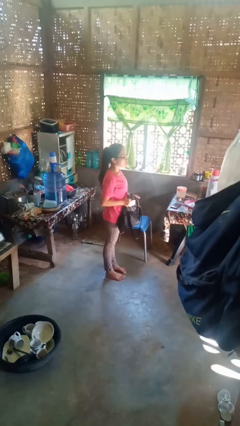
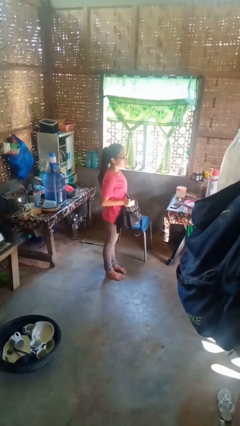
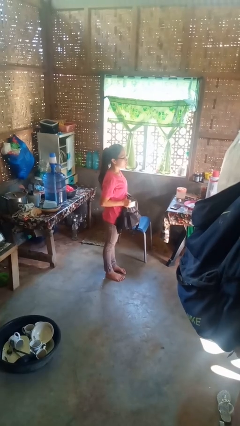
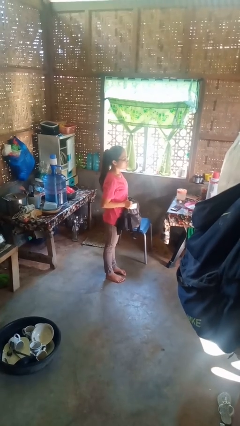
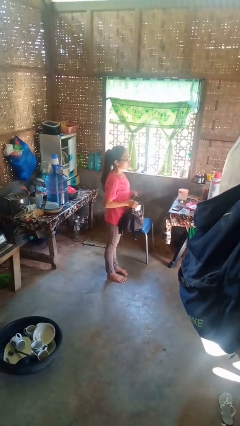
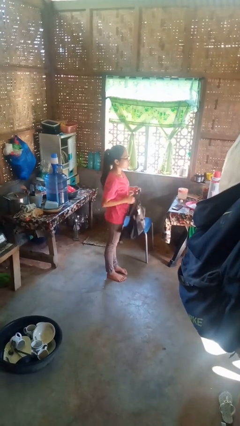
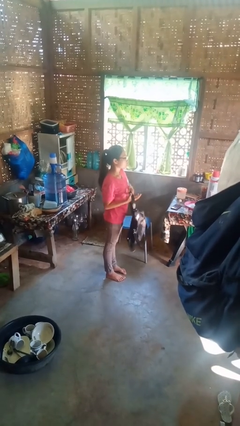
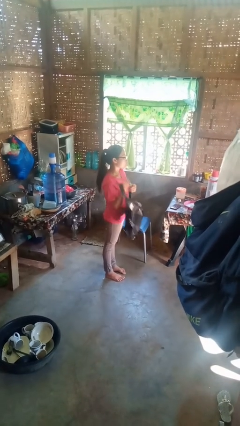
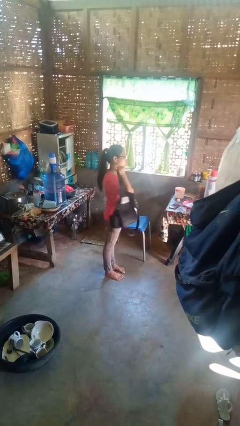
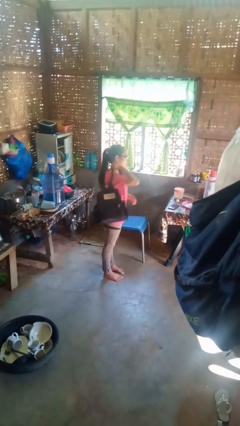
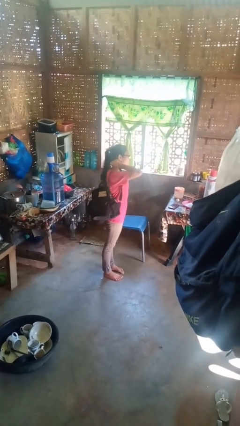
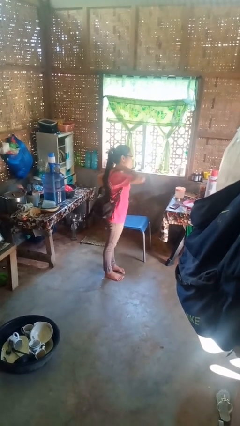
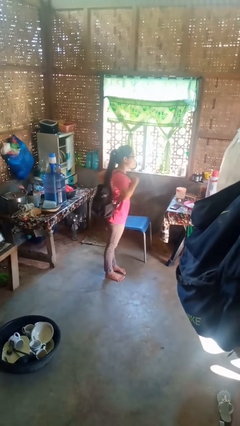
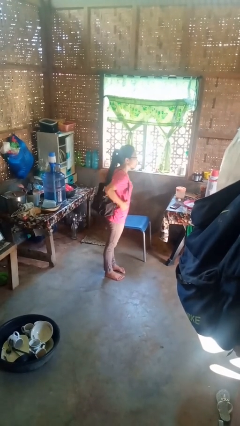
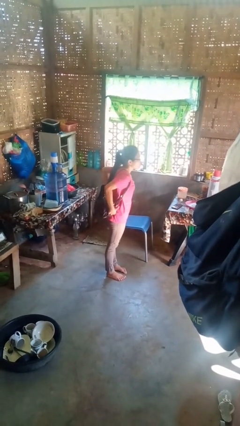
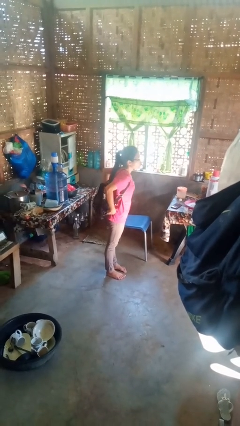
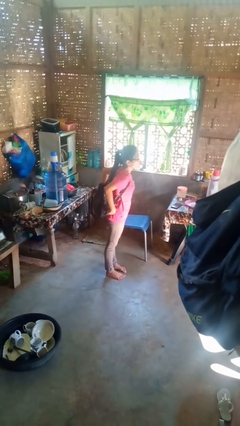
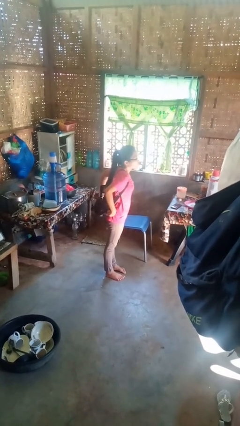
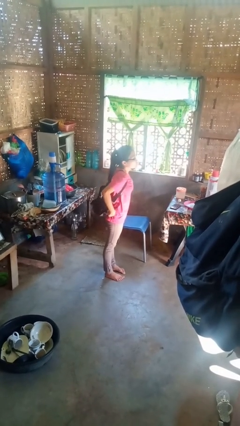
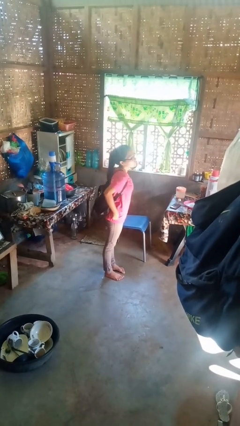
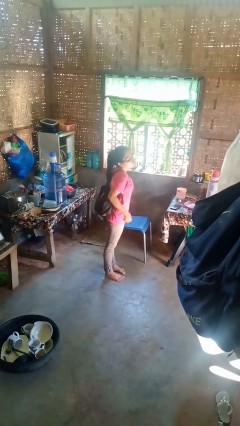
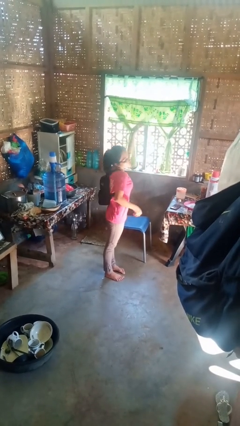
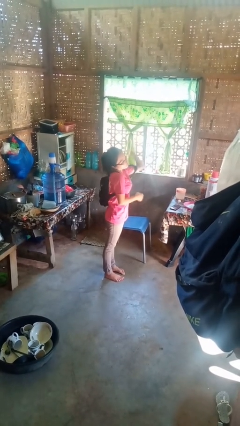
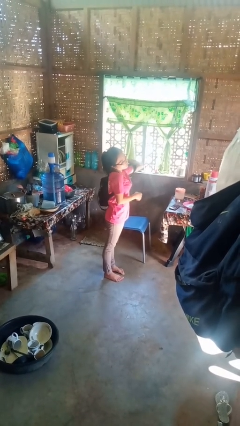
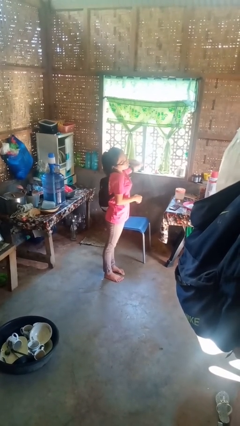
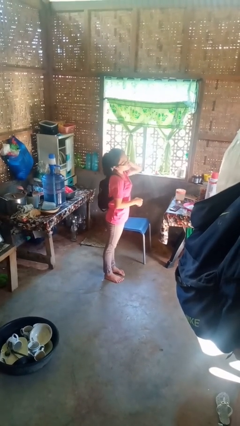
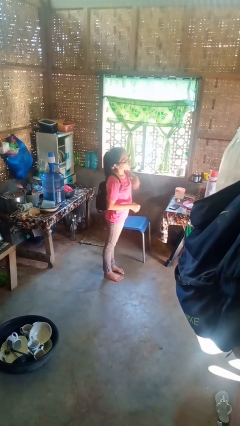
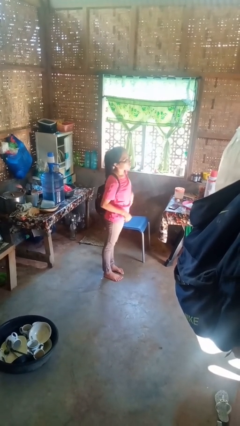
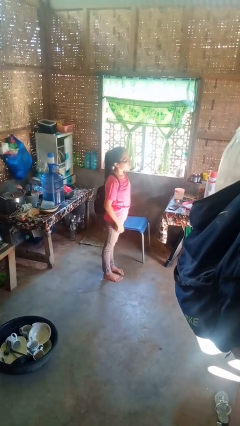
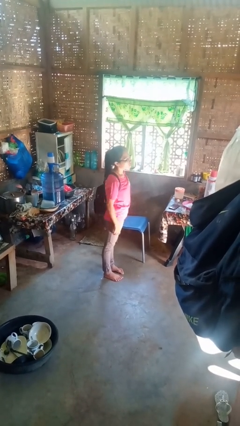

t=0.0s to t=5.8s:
person puts on backpack

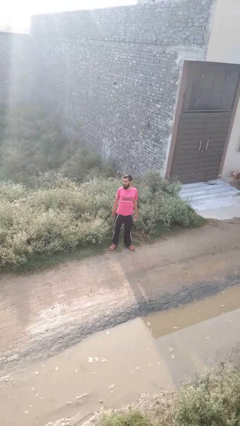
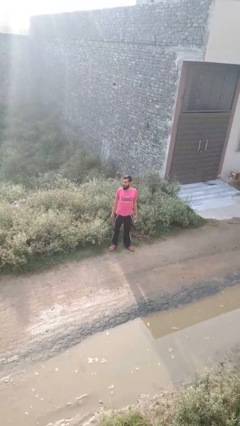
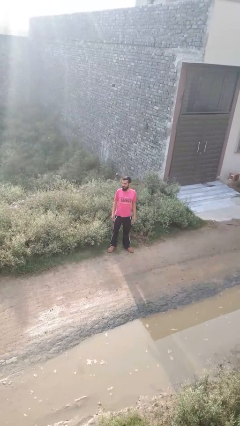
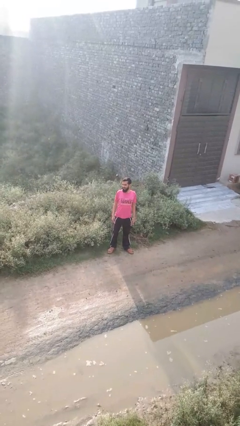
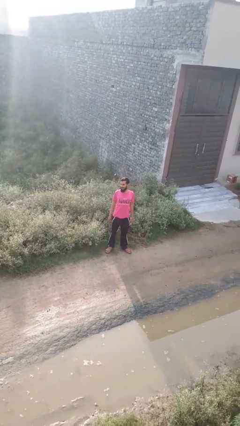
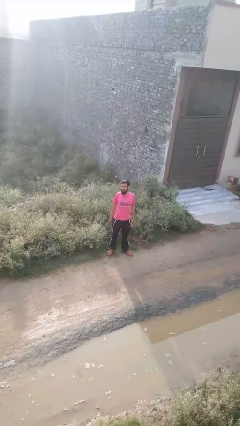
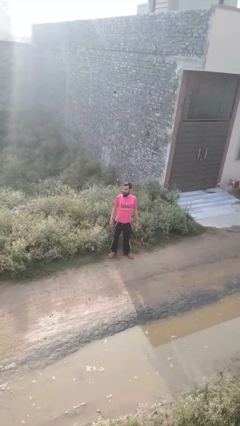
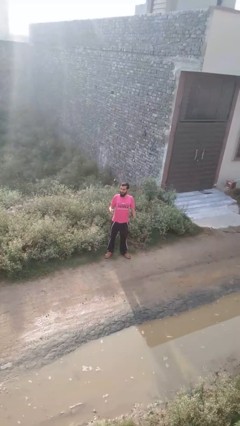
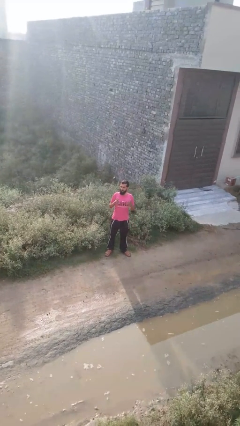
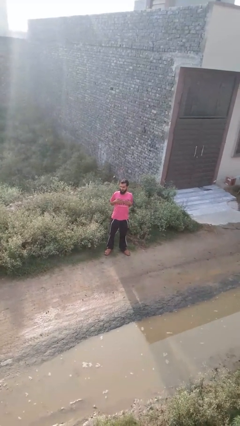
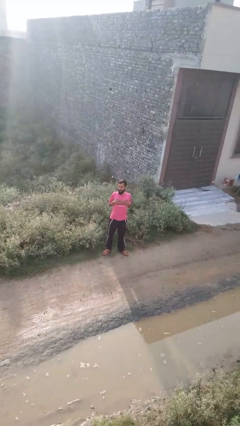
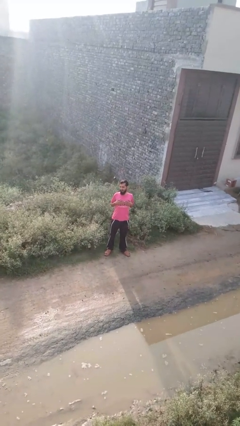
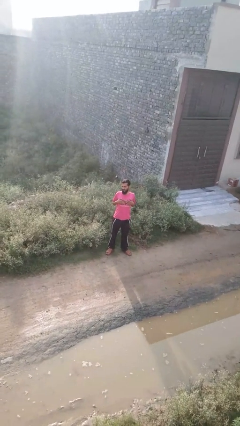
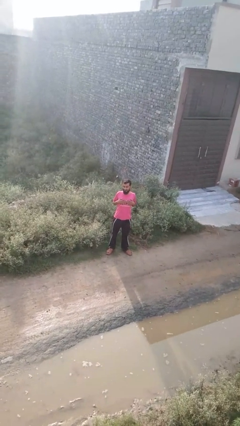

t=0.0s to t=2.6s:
person drums on chest

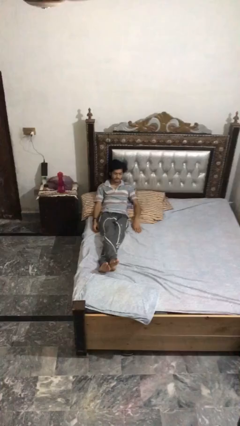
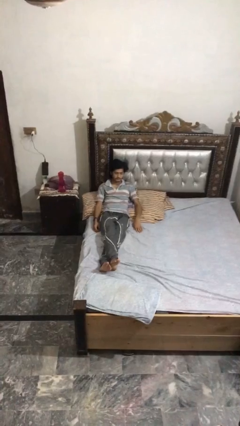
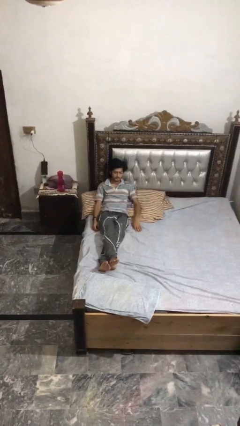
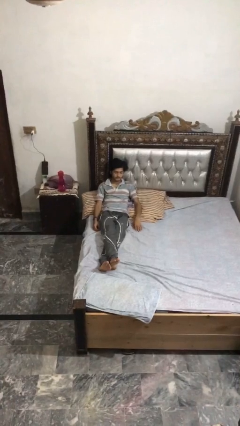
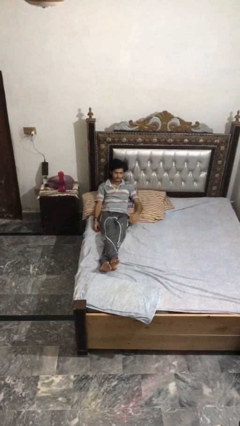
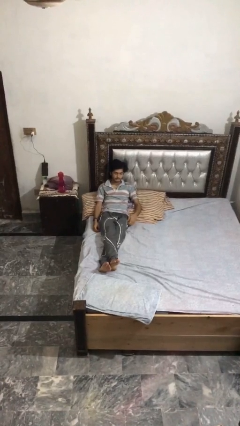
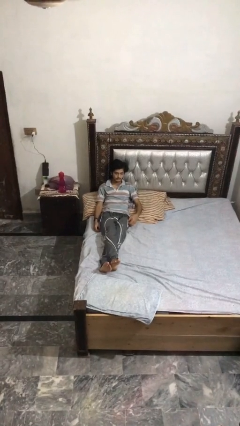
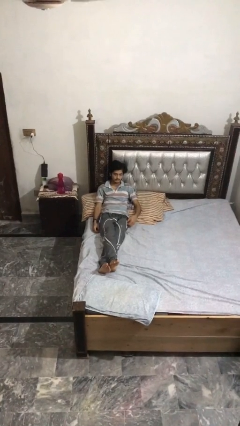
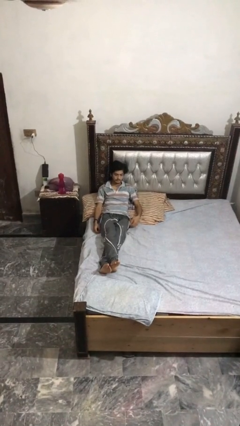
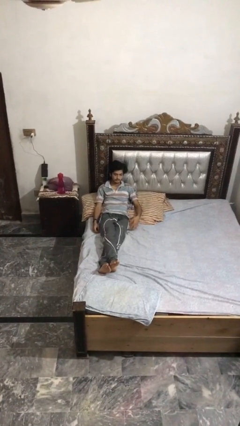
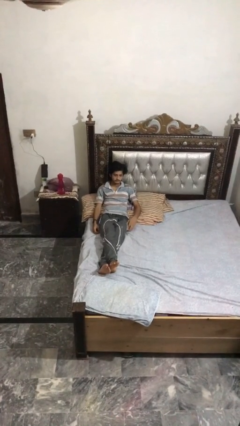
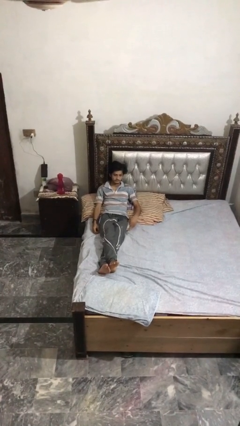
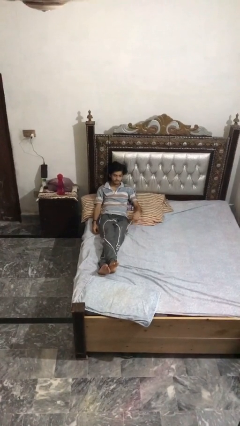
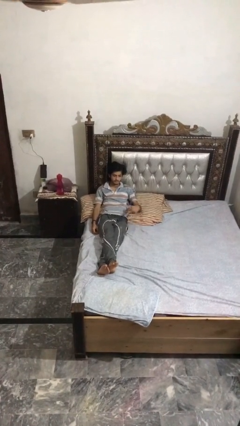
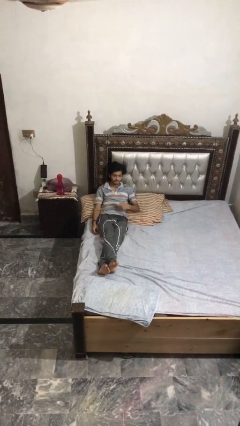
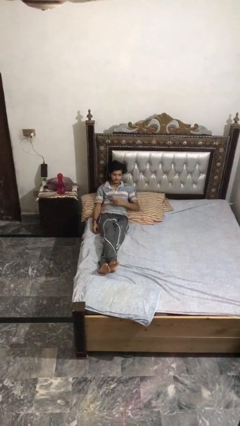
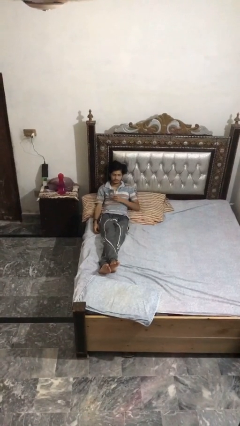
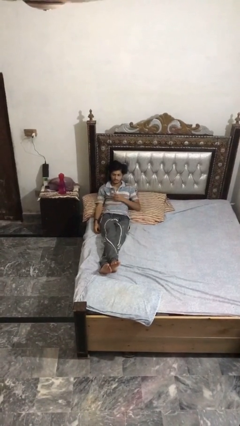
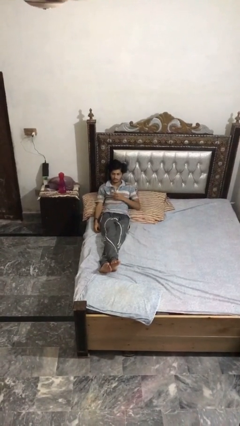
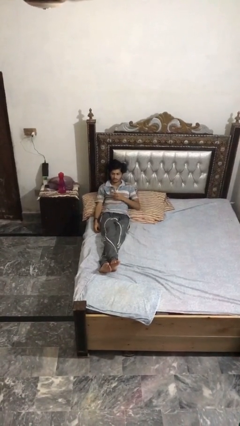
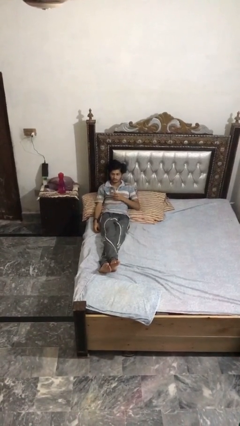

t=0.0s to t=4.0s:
person takes phone from pocket

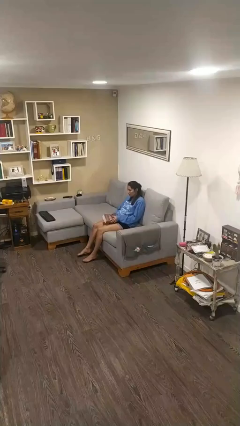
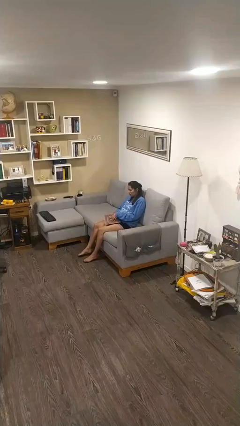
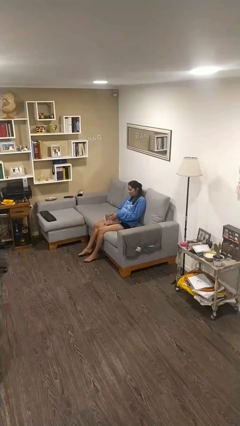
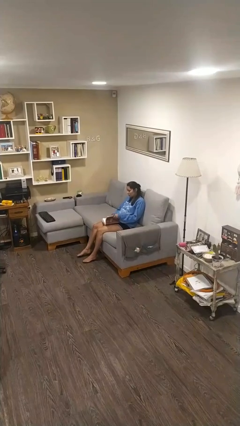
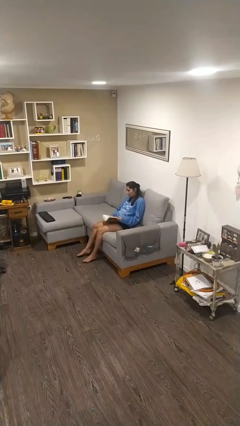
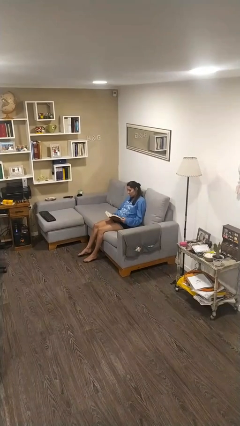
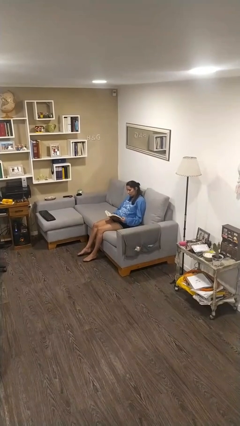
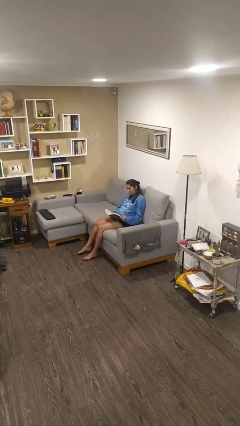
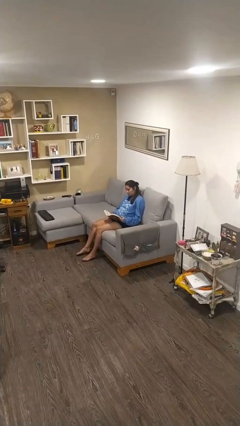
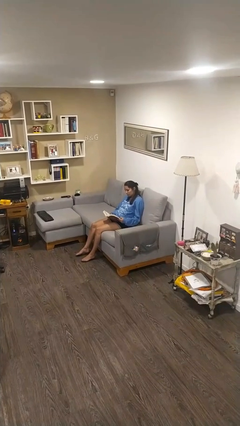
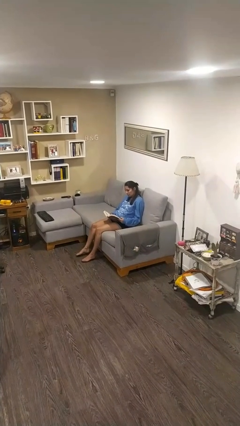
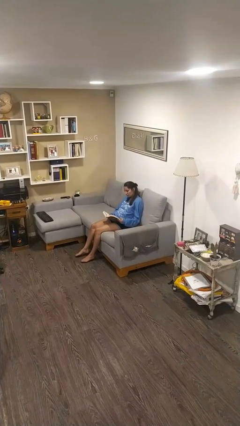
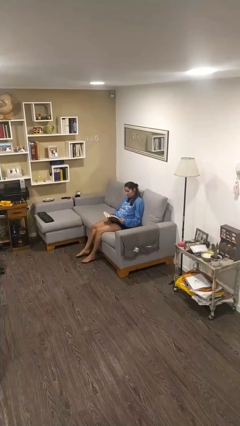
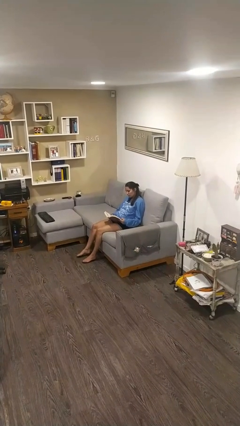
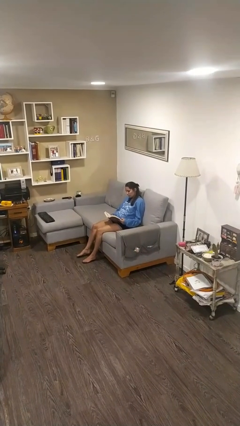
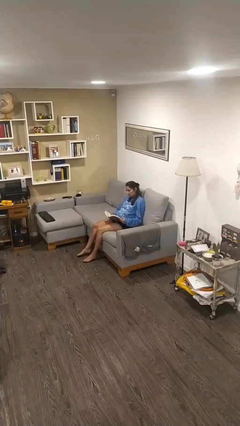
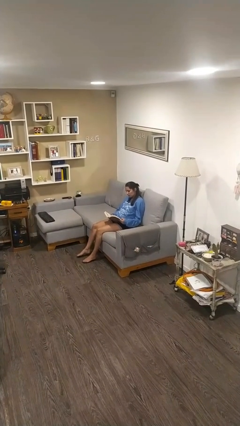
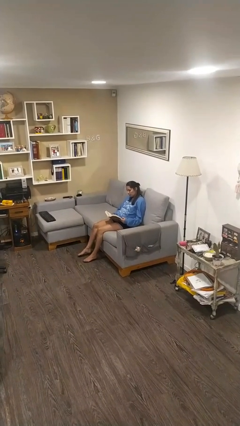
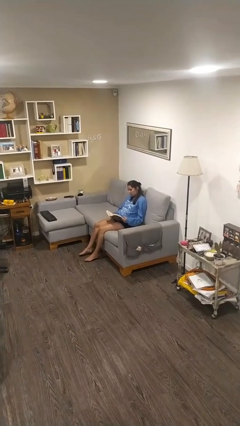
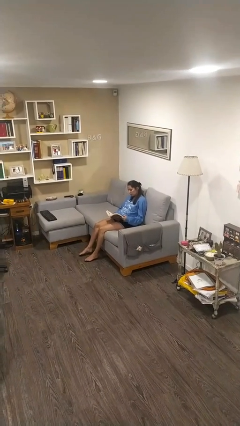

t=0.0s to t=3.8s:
person reads document

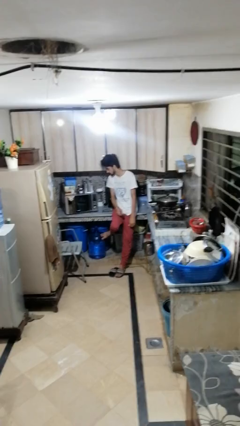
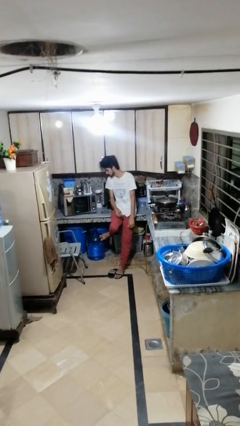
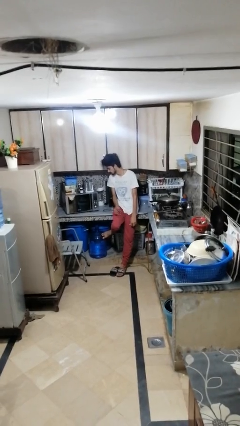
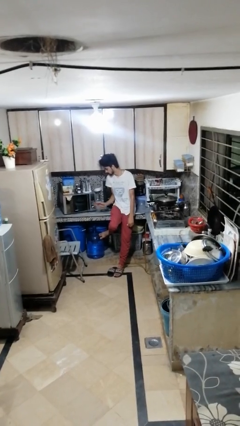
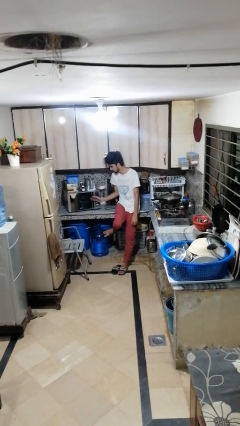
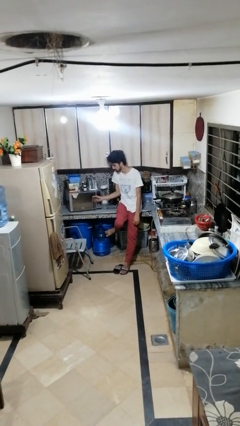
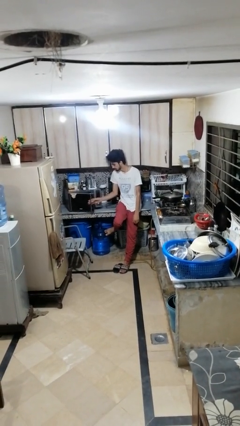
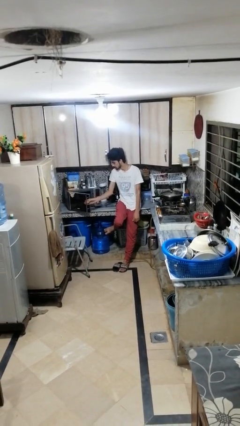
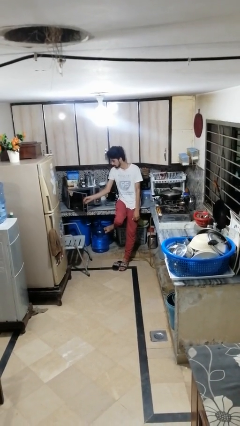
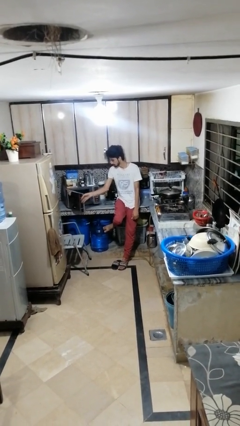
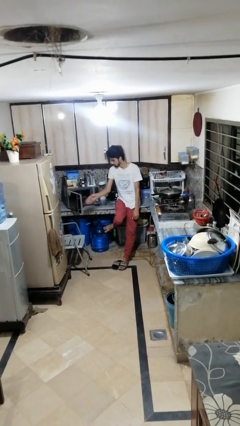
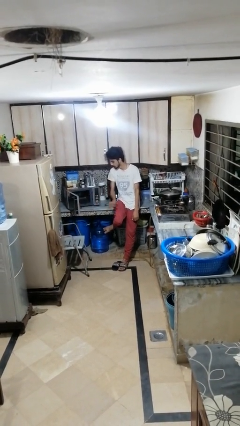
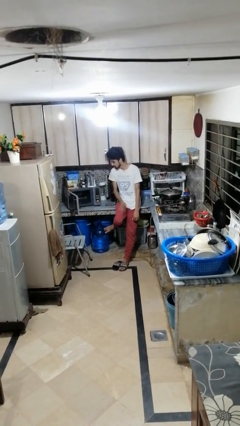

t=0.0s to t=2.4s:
person opens oven door
